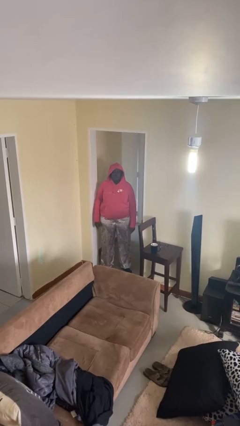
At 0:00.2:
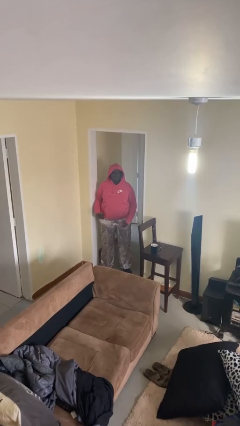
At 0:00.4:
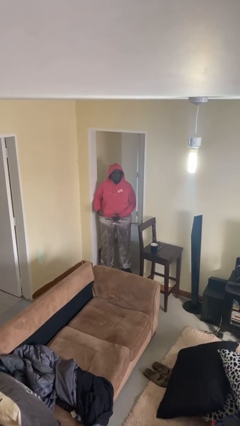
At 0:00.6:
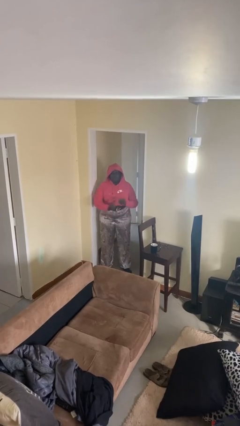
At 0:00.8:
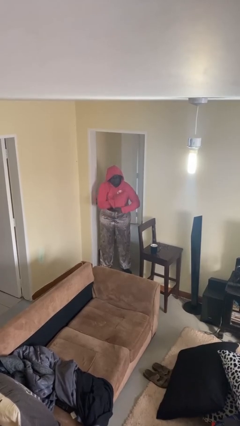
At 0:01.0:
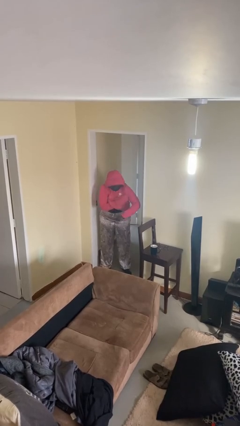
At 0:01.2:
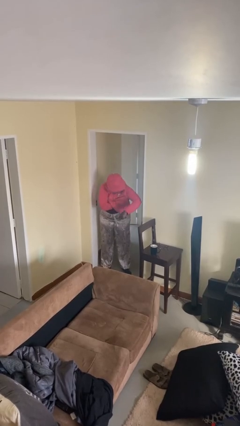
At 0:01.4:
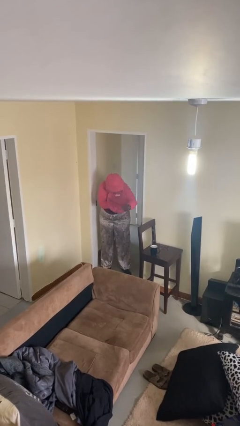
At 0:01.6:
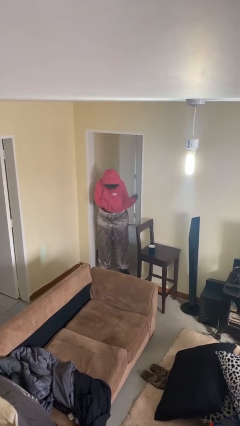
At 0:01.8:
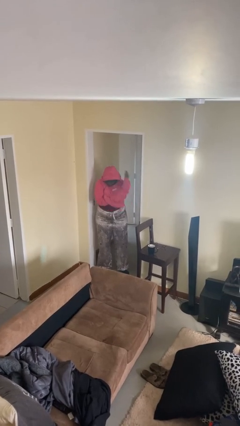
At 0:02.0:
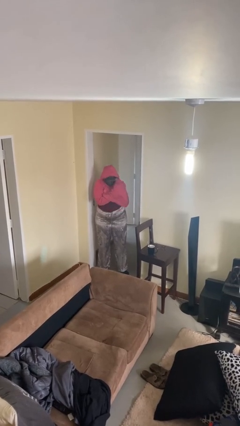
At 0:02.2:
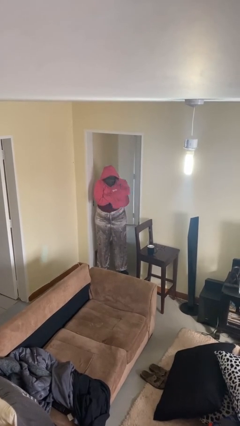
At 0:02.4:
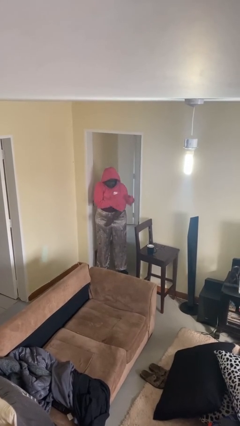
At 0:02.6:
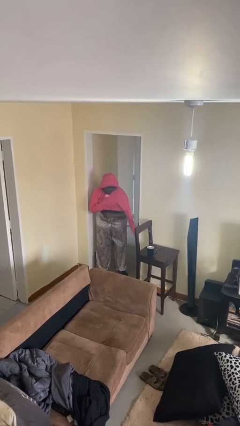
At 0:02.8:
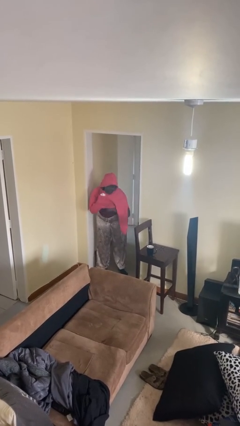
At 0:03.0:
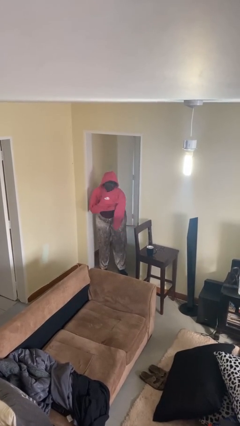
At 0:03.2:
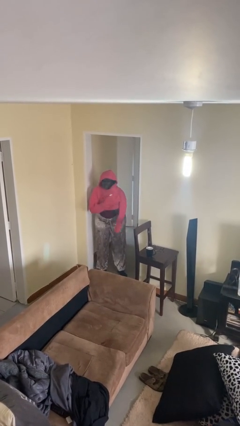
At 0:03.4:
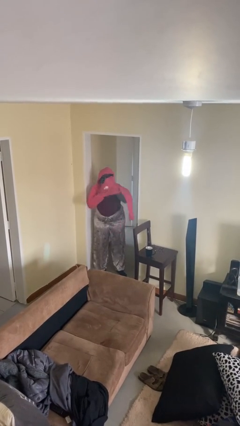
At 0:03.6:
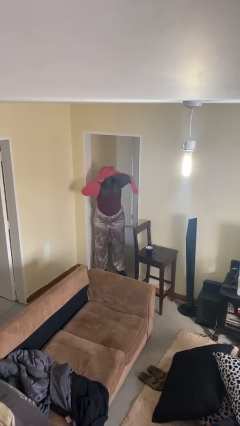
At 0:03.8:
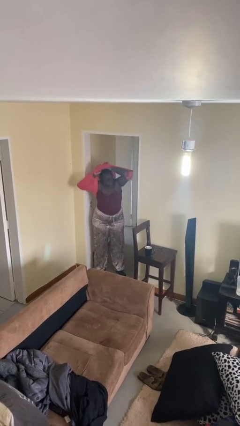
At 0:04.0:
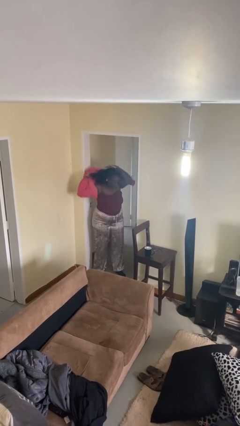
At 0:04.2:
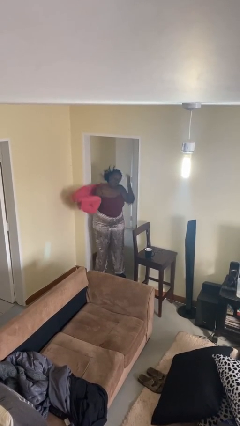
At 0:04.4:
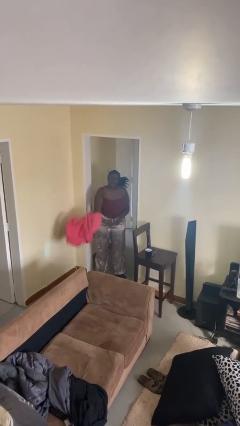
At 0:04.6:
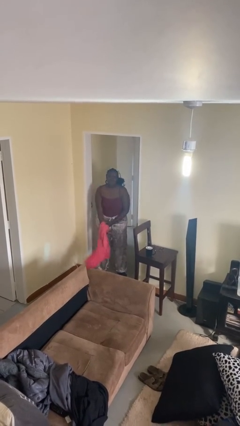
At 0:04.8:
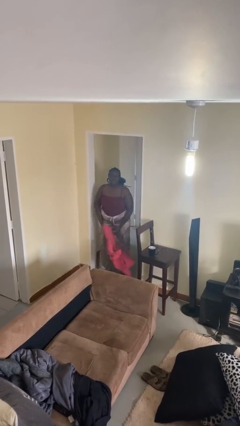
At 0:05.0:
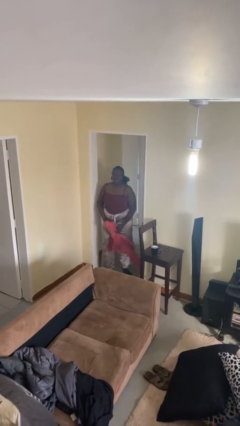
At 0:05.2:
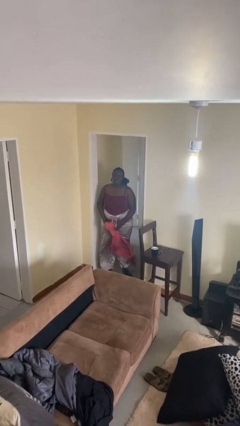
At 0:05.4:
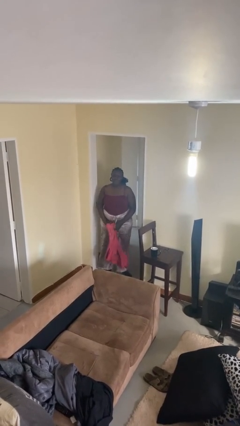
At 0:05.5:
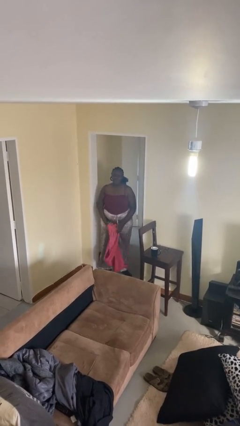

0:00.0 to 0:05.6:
person takes off hoodie

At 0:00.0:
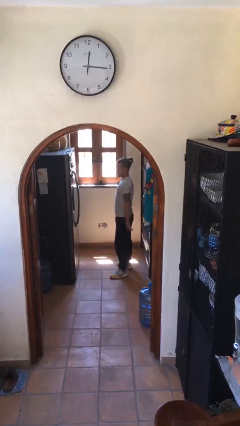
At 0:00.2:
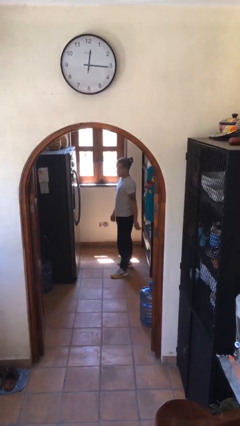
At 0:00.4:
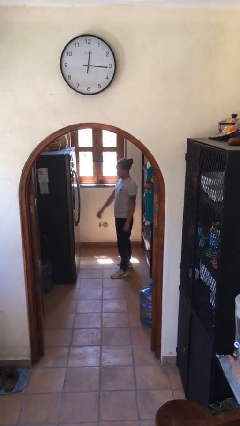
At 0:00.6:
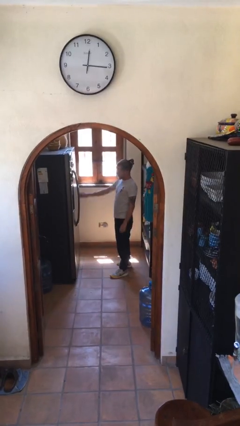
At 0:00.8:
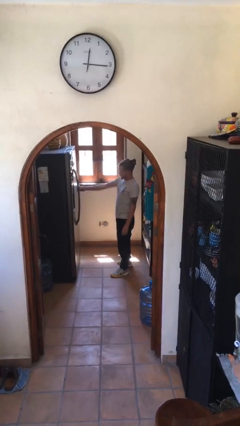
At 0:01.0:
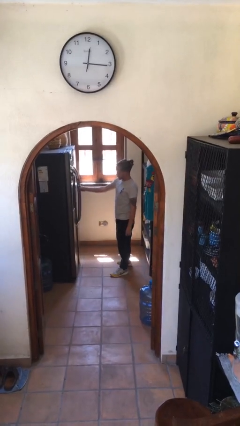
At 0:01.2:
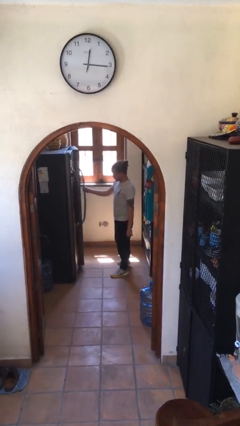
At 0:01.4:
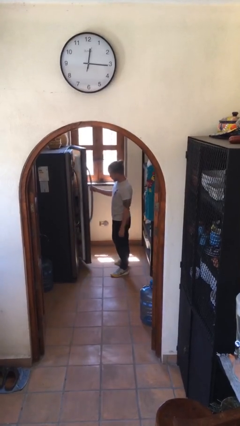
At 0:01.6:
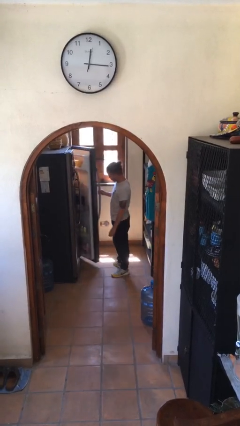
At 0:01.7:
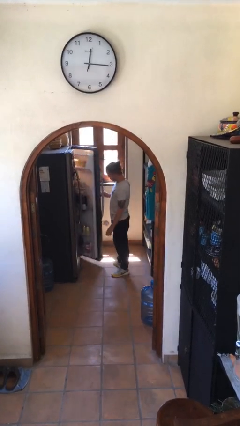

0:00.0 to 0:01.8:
person opens refrigerator

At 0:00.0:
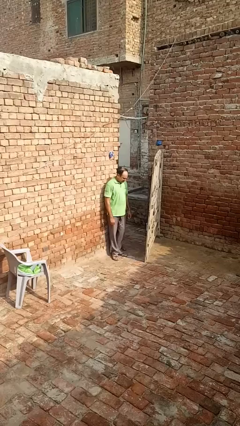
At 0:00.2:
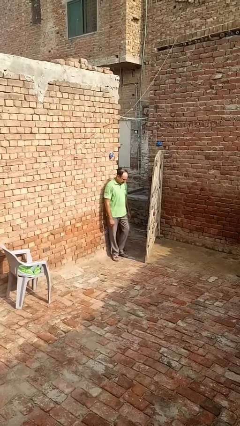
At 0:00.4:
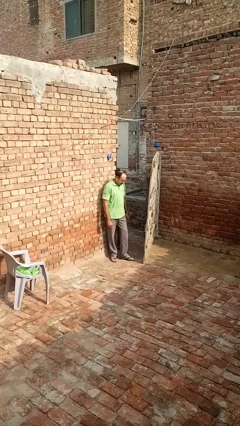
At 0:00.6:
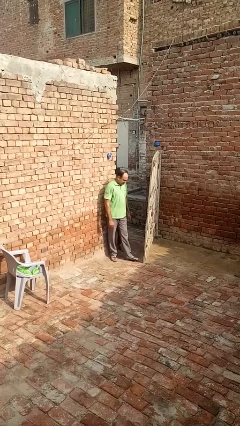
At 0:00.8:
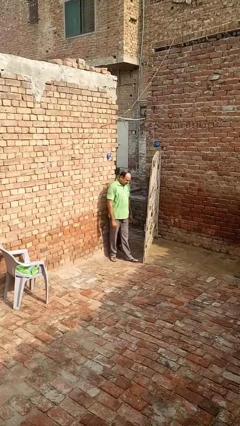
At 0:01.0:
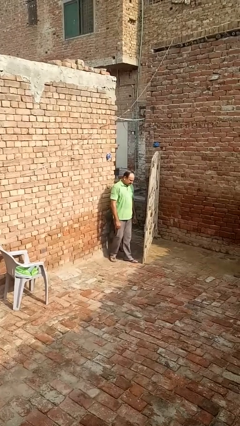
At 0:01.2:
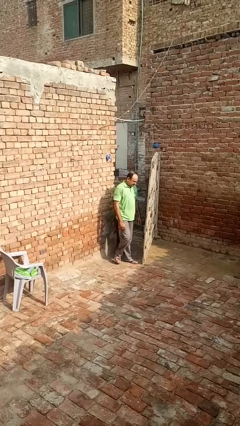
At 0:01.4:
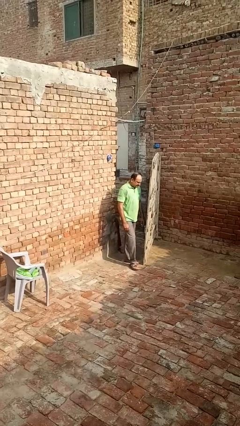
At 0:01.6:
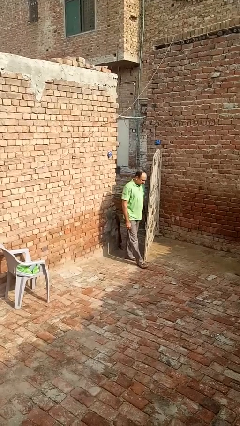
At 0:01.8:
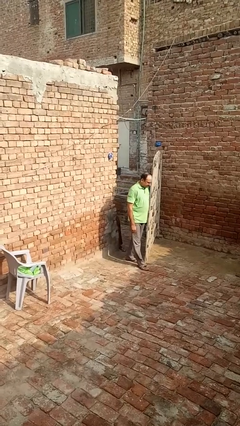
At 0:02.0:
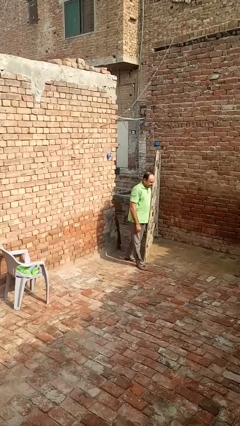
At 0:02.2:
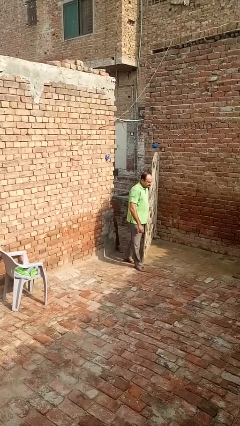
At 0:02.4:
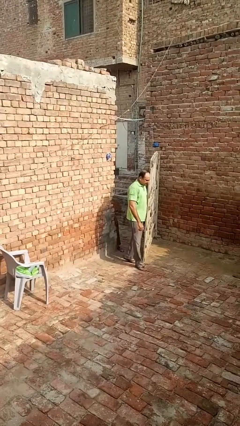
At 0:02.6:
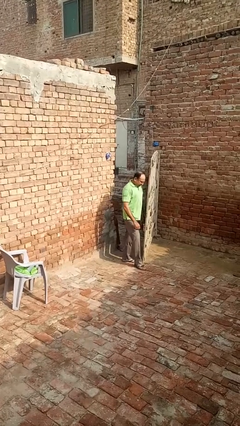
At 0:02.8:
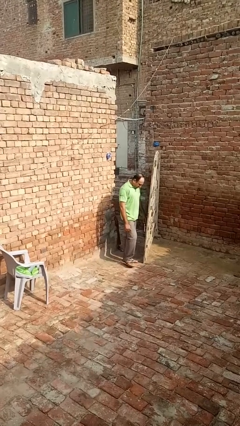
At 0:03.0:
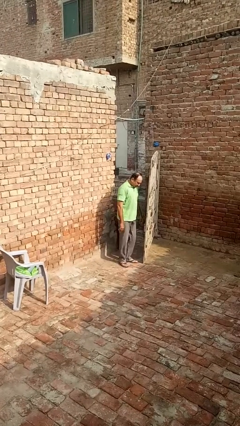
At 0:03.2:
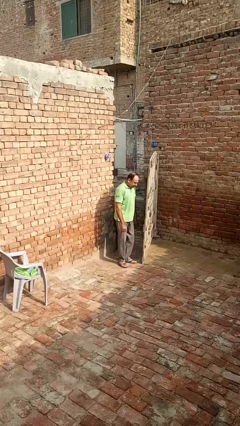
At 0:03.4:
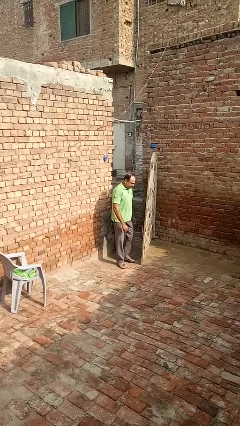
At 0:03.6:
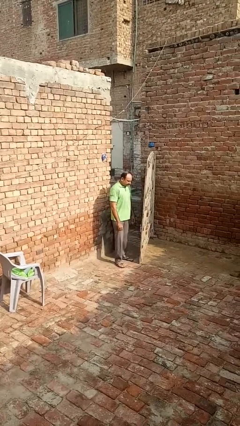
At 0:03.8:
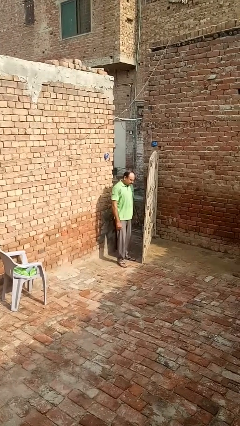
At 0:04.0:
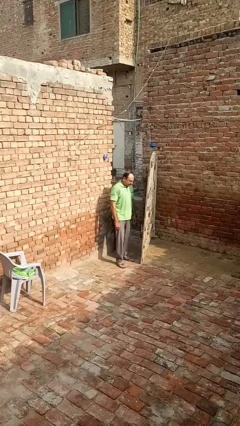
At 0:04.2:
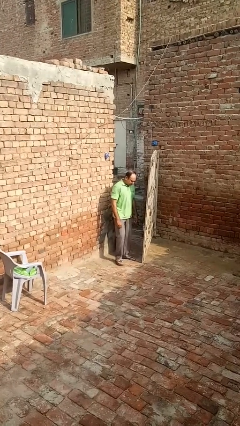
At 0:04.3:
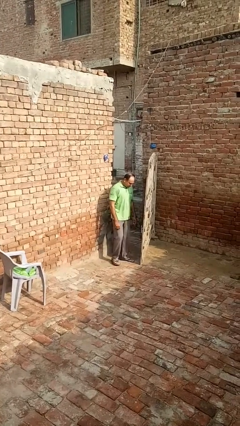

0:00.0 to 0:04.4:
person bumps into wall

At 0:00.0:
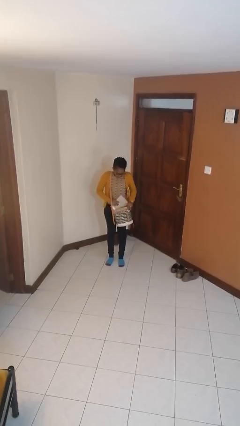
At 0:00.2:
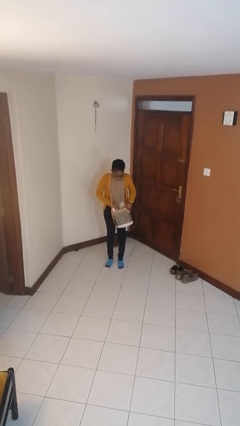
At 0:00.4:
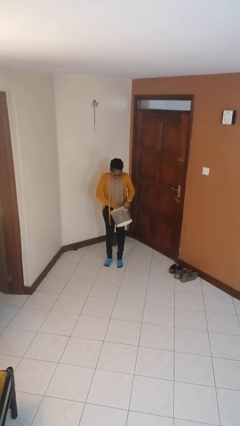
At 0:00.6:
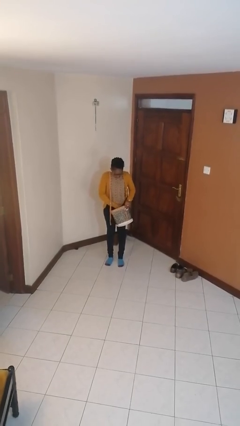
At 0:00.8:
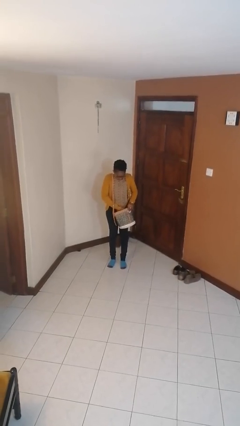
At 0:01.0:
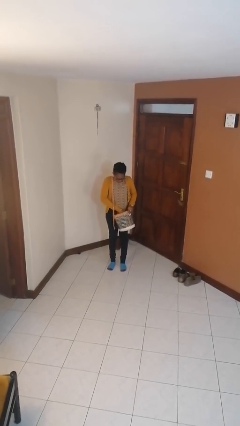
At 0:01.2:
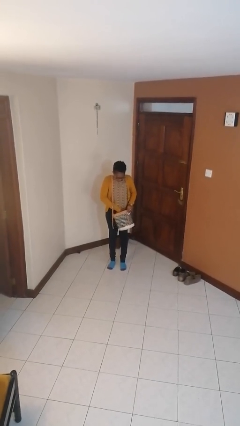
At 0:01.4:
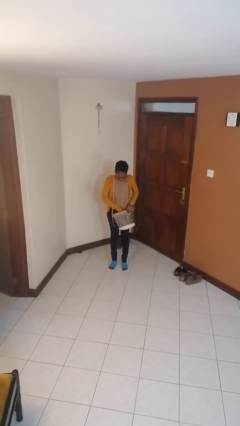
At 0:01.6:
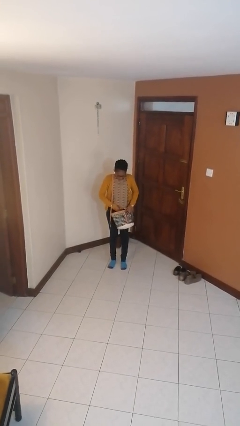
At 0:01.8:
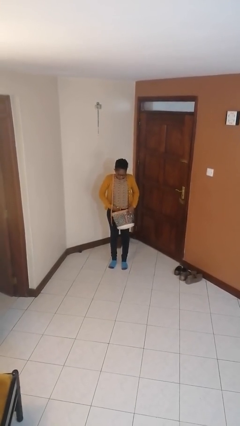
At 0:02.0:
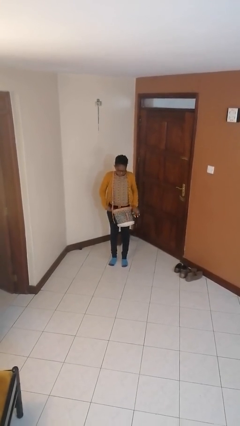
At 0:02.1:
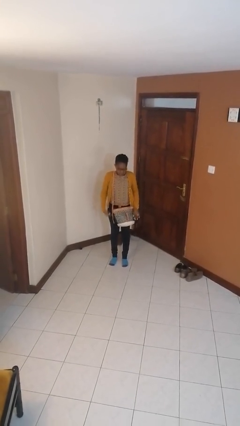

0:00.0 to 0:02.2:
person puts object into purse

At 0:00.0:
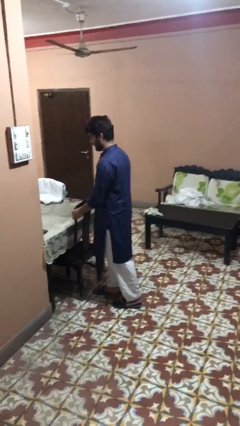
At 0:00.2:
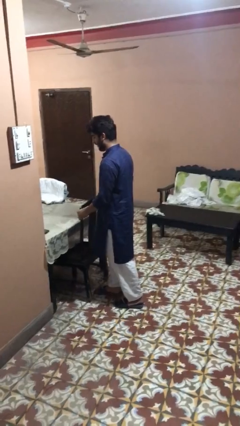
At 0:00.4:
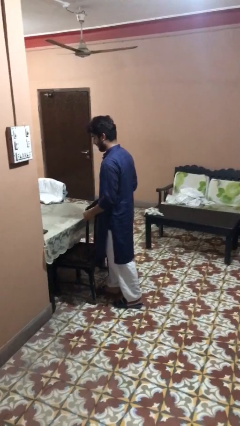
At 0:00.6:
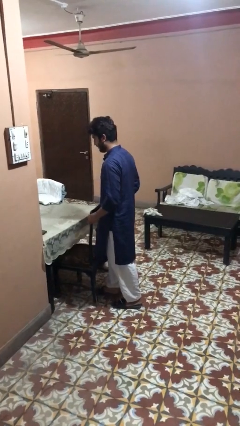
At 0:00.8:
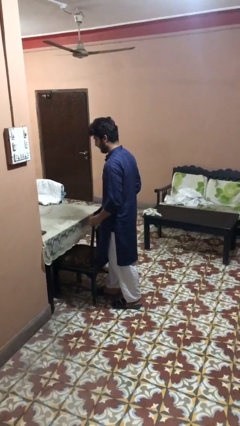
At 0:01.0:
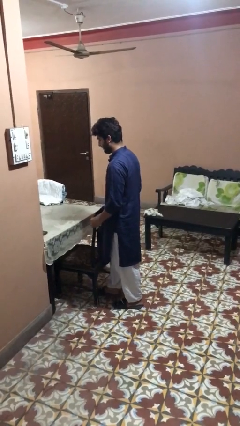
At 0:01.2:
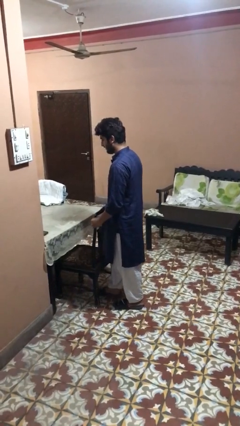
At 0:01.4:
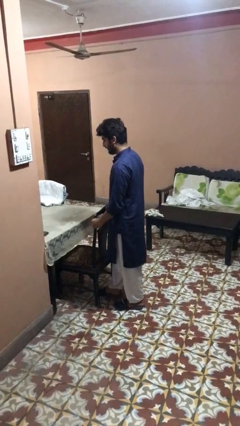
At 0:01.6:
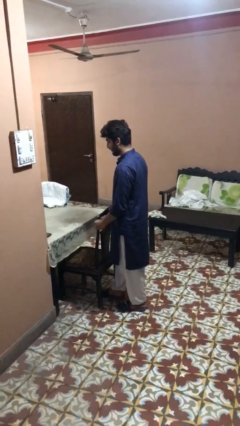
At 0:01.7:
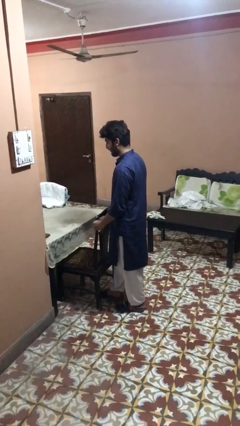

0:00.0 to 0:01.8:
person pulls out chair

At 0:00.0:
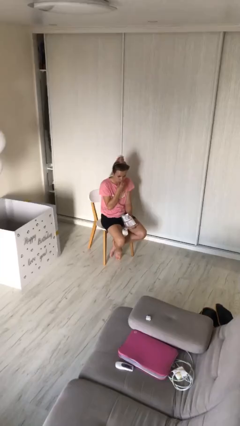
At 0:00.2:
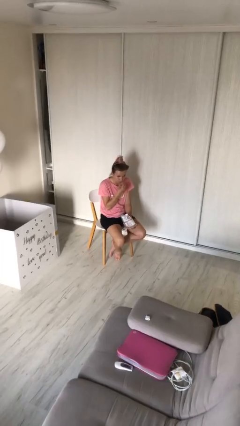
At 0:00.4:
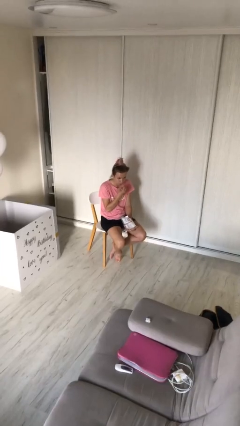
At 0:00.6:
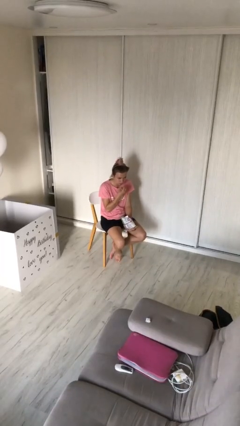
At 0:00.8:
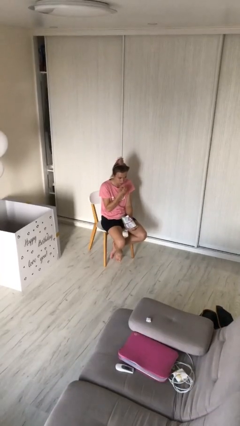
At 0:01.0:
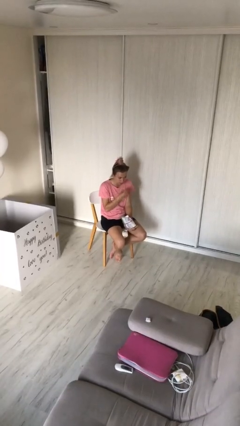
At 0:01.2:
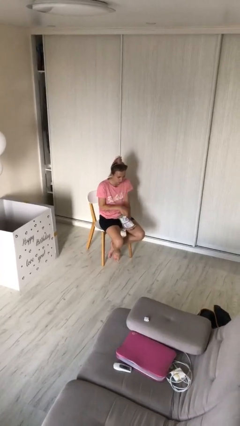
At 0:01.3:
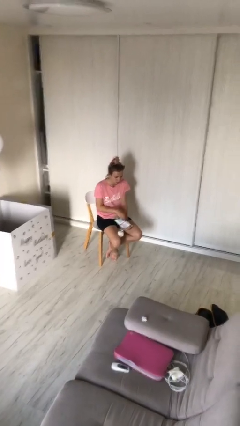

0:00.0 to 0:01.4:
person eats snack from bag
